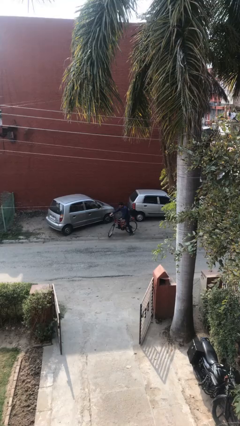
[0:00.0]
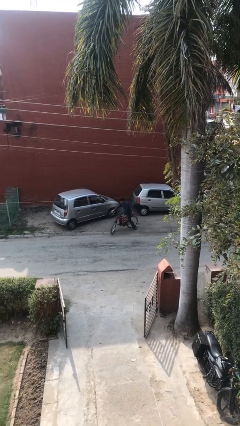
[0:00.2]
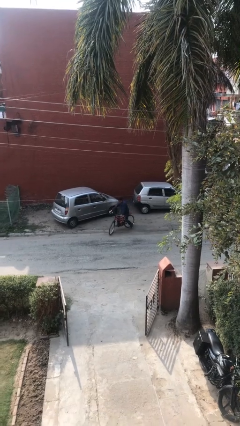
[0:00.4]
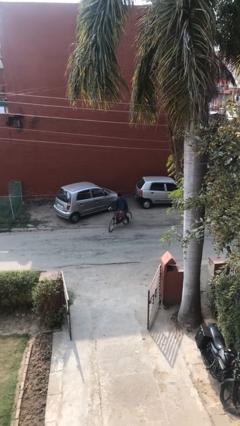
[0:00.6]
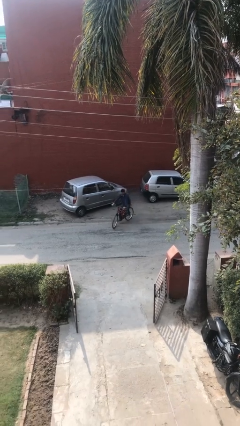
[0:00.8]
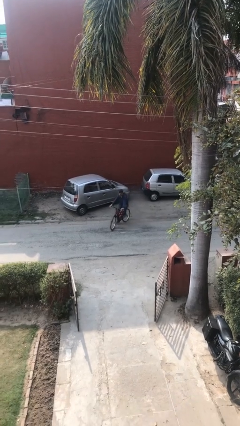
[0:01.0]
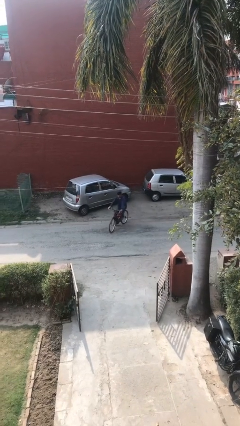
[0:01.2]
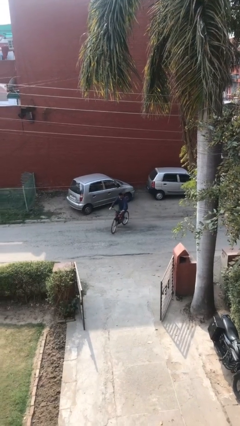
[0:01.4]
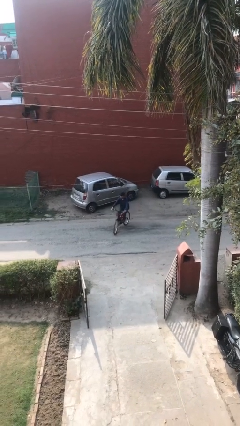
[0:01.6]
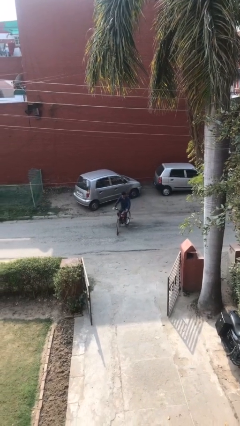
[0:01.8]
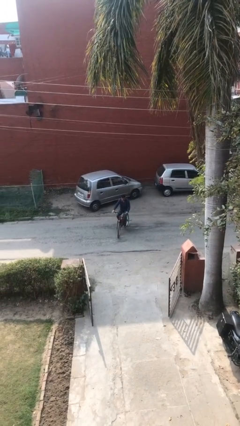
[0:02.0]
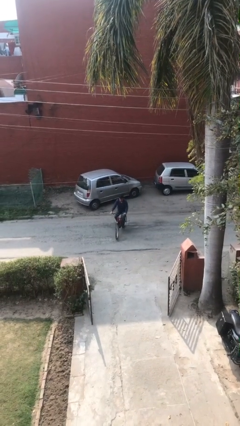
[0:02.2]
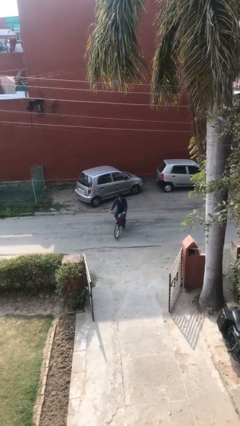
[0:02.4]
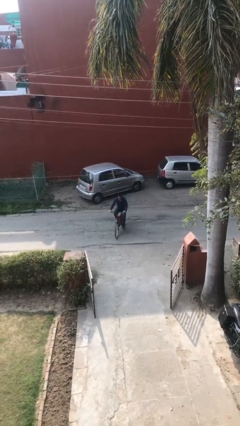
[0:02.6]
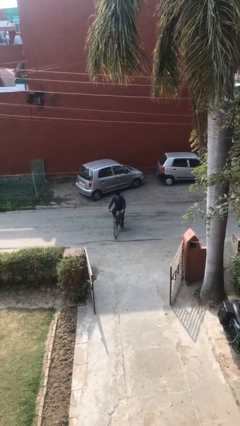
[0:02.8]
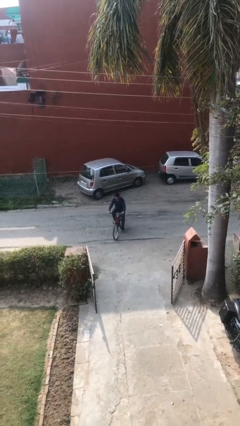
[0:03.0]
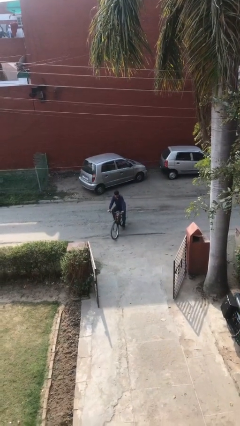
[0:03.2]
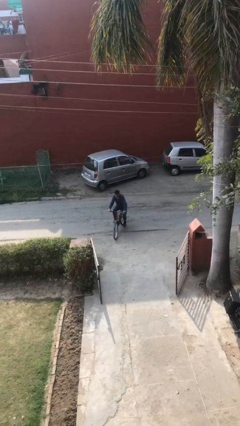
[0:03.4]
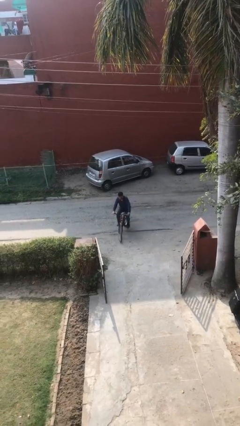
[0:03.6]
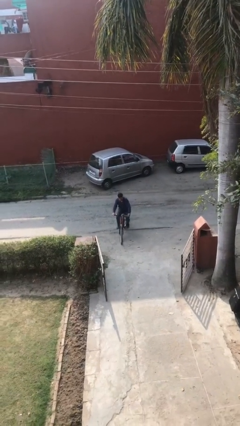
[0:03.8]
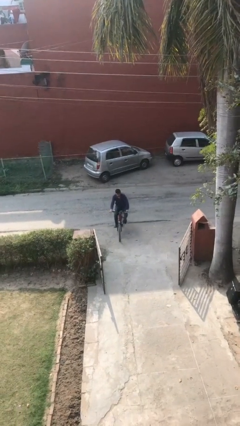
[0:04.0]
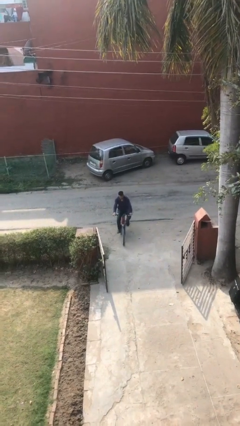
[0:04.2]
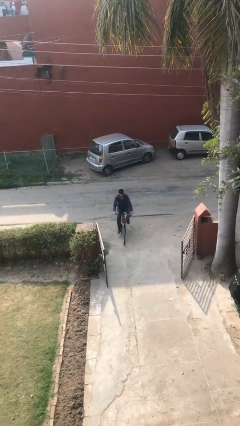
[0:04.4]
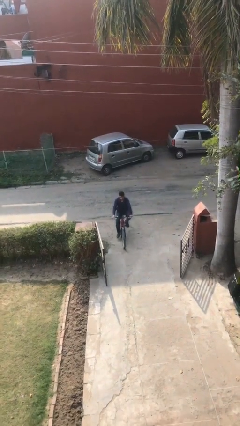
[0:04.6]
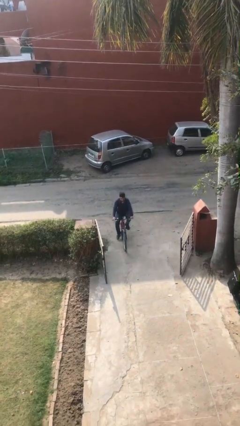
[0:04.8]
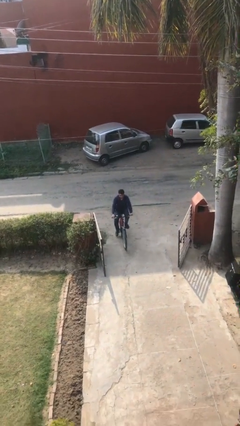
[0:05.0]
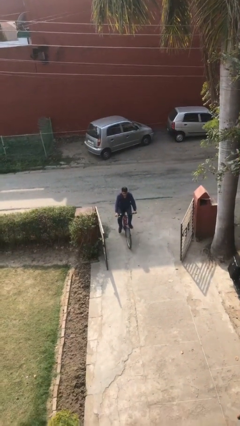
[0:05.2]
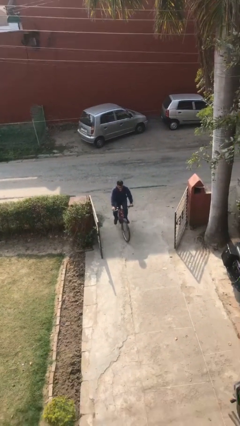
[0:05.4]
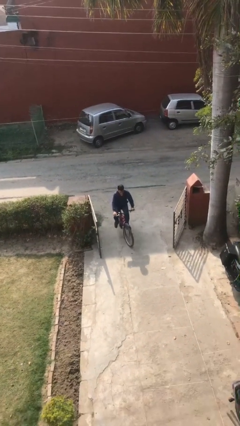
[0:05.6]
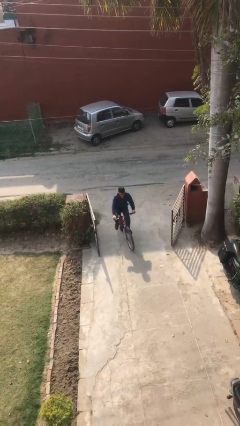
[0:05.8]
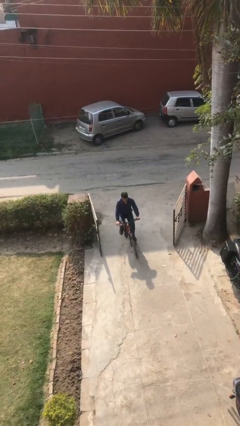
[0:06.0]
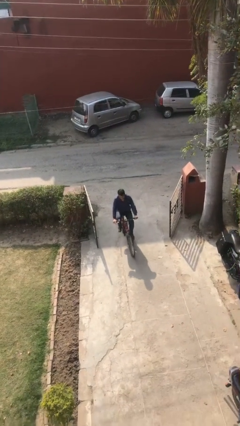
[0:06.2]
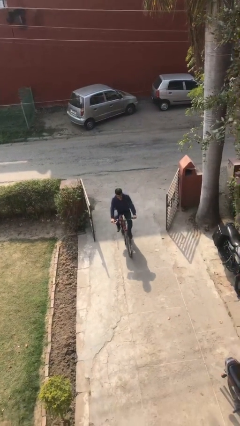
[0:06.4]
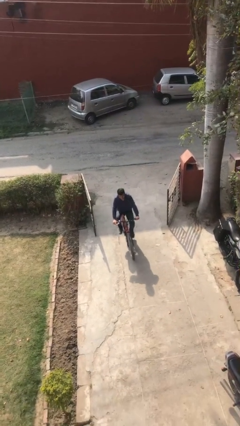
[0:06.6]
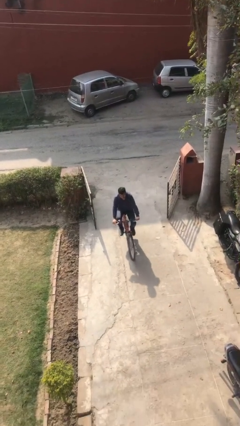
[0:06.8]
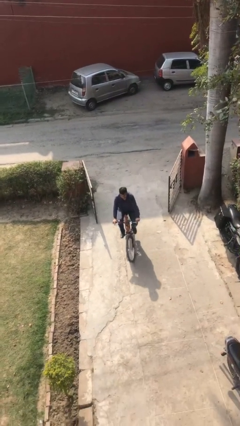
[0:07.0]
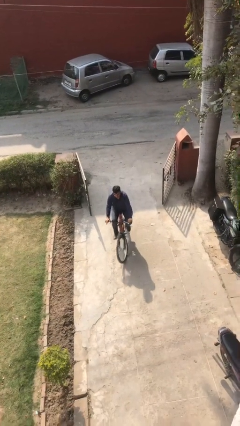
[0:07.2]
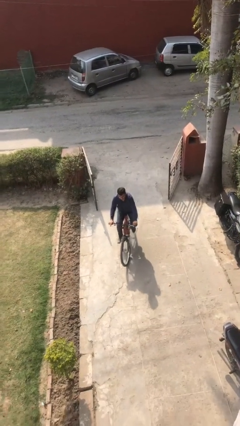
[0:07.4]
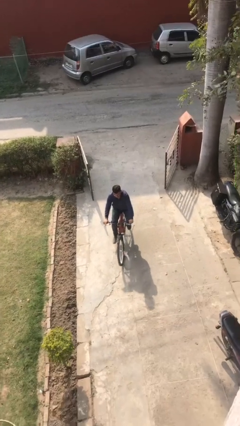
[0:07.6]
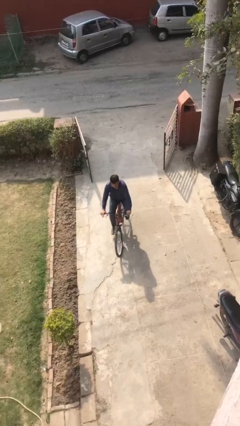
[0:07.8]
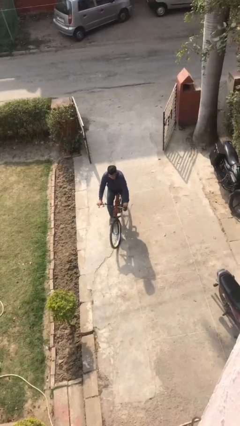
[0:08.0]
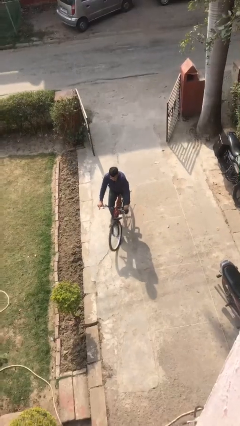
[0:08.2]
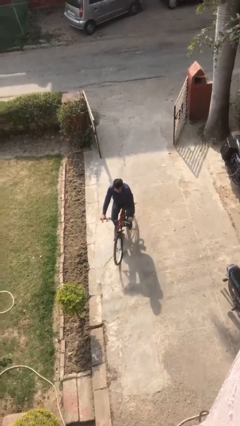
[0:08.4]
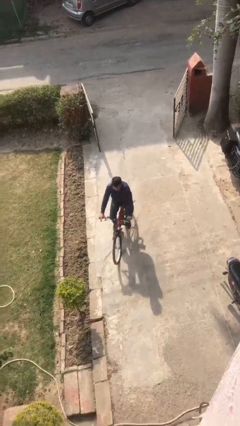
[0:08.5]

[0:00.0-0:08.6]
person rides bicycle

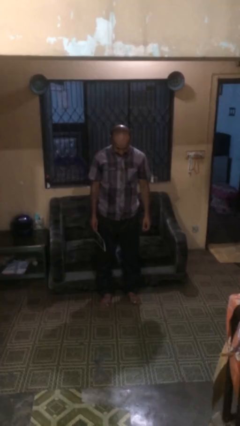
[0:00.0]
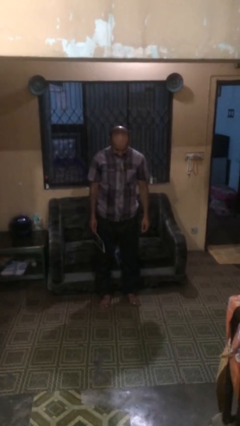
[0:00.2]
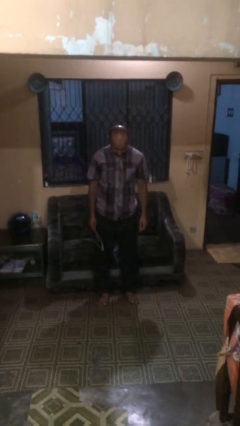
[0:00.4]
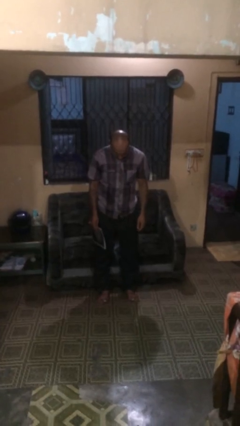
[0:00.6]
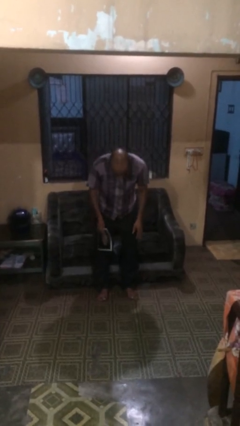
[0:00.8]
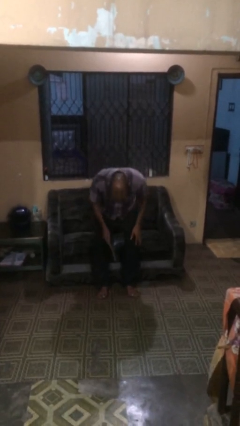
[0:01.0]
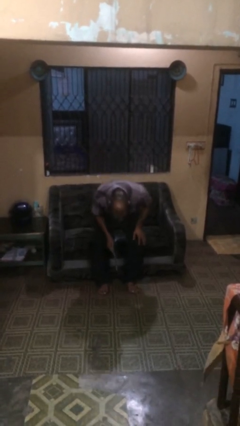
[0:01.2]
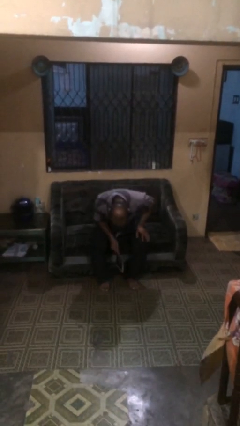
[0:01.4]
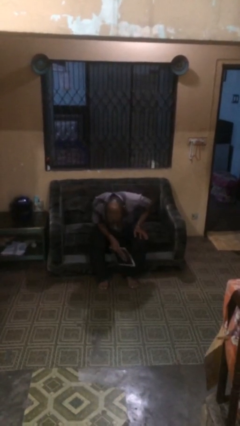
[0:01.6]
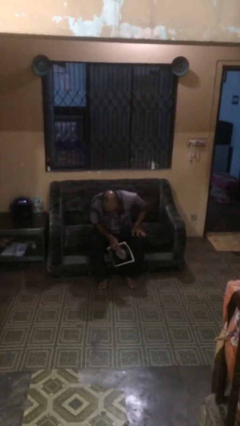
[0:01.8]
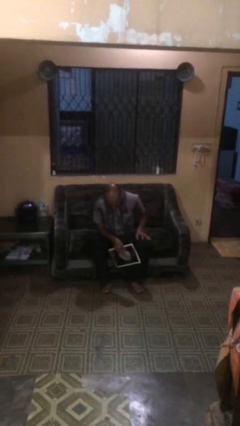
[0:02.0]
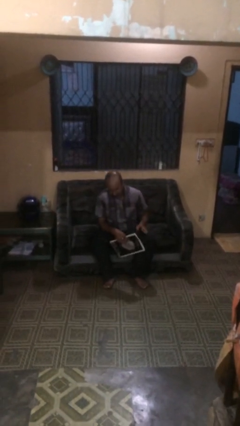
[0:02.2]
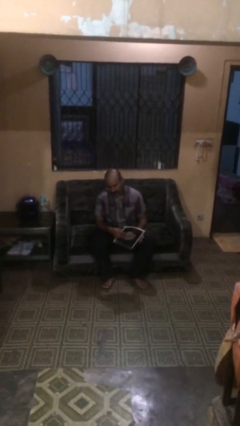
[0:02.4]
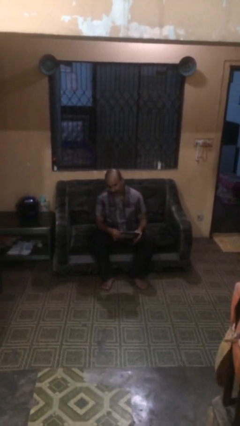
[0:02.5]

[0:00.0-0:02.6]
person sits down

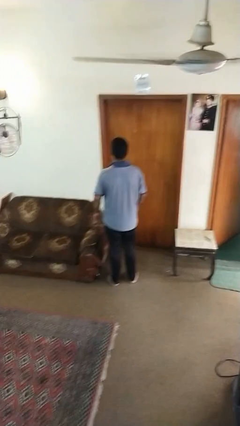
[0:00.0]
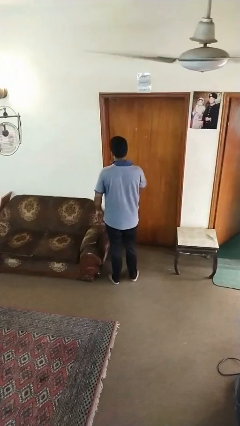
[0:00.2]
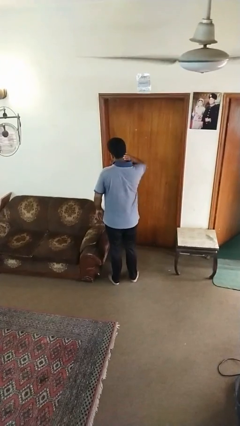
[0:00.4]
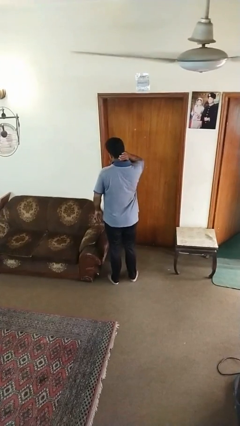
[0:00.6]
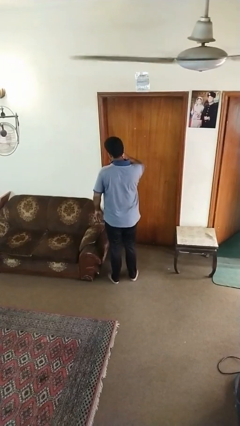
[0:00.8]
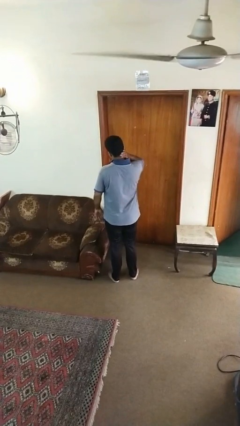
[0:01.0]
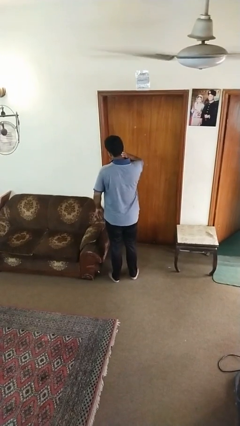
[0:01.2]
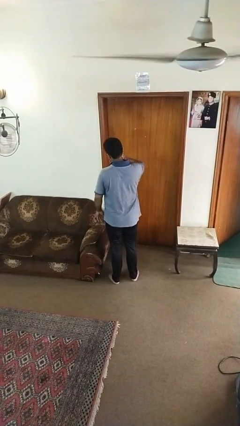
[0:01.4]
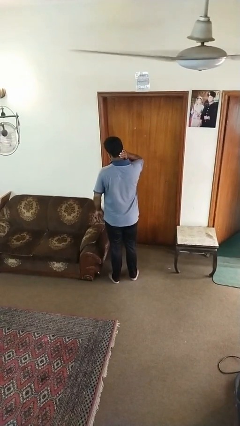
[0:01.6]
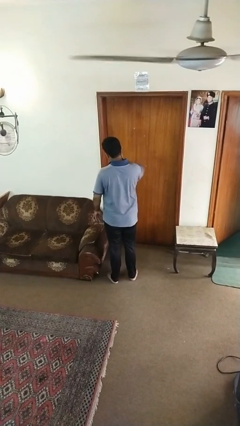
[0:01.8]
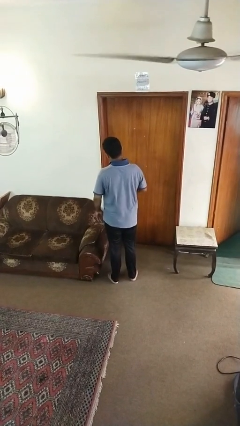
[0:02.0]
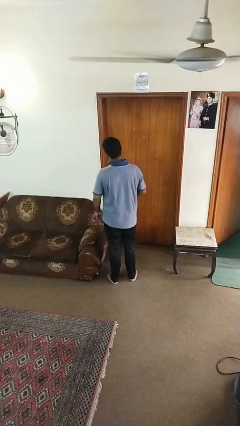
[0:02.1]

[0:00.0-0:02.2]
person rubs neck

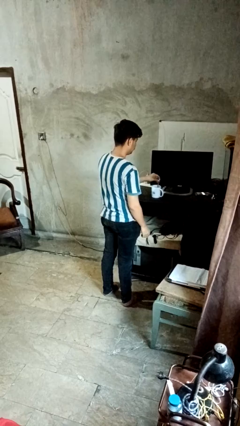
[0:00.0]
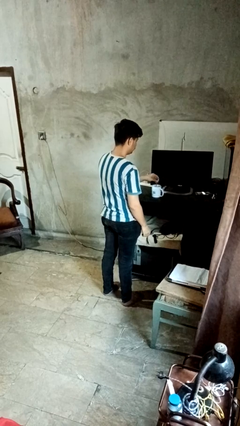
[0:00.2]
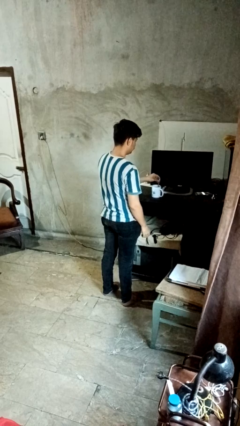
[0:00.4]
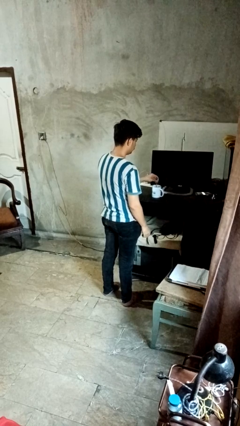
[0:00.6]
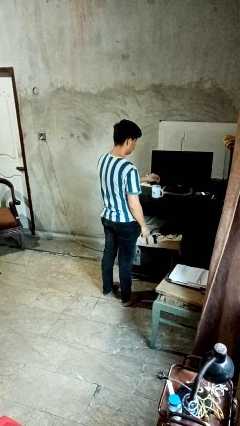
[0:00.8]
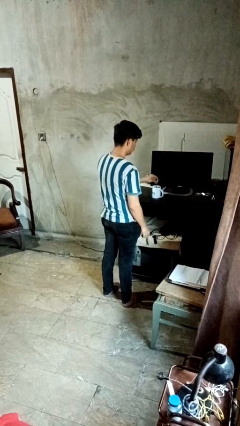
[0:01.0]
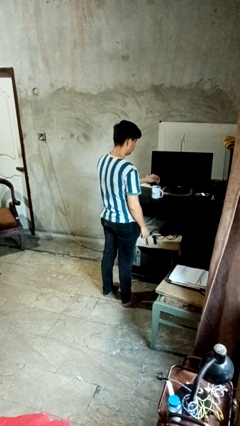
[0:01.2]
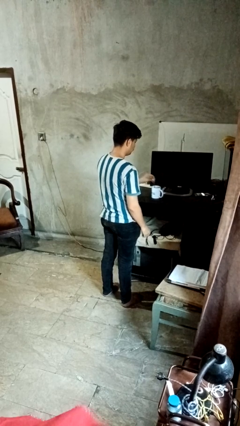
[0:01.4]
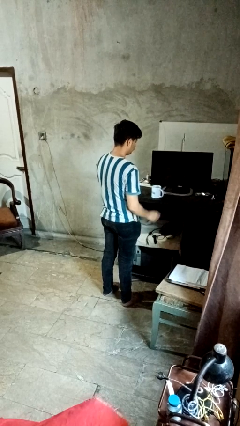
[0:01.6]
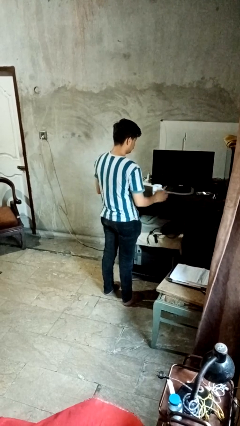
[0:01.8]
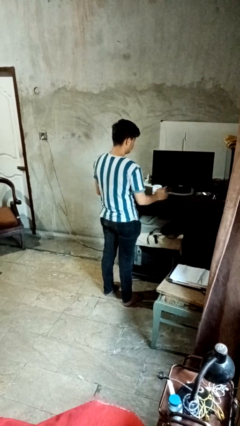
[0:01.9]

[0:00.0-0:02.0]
person stirs mug

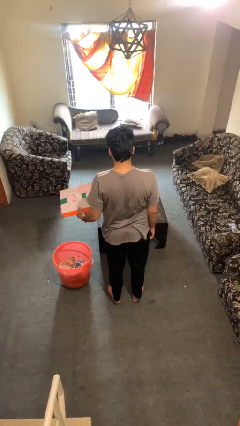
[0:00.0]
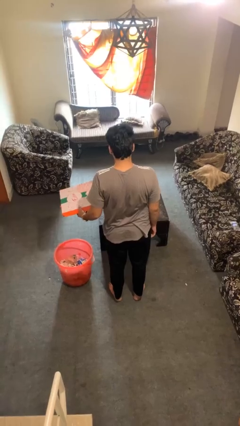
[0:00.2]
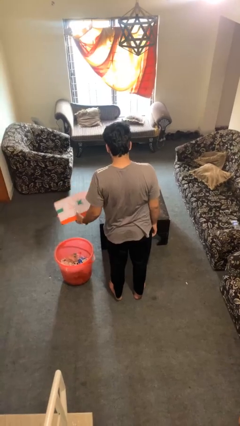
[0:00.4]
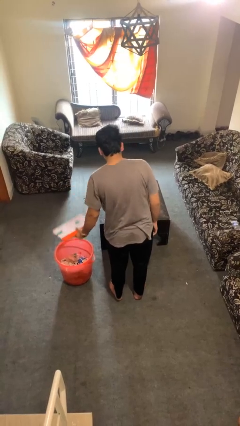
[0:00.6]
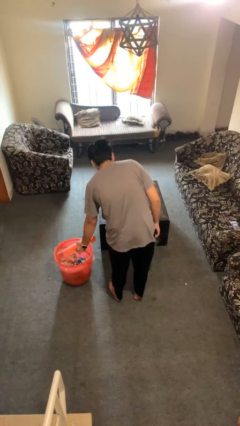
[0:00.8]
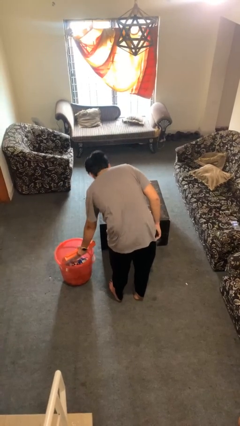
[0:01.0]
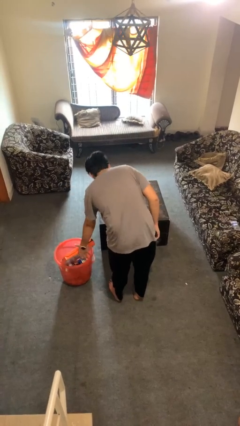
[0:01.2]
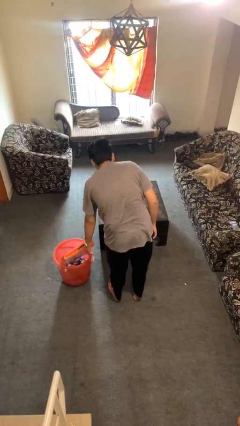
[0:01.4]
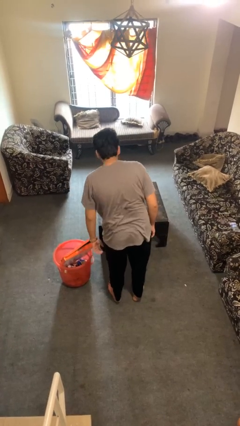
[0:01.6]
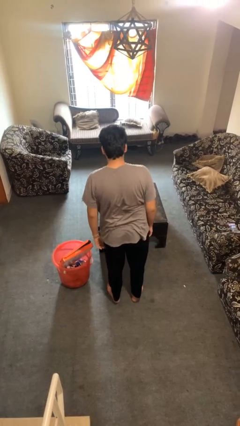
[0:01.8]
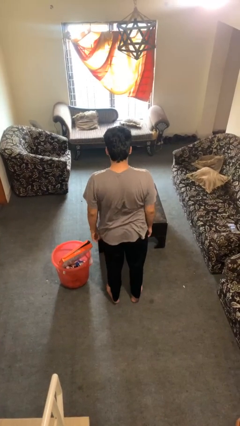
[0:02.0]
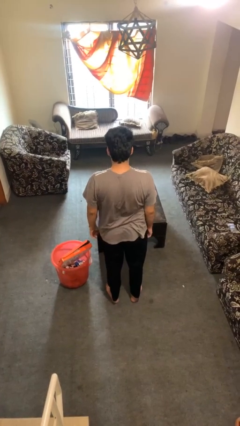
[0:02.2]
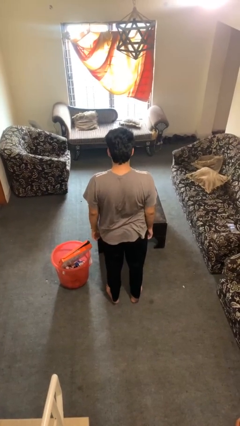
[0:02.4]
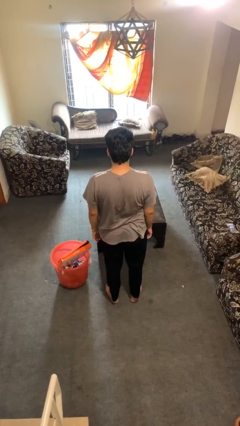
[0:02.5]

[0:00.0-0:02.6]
person puts object into basket
